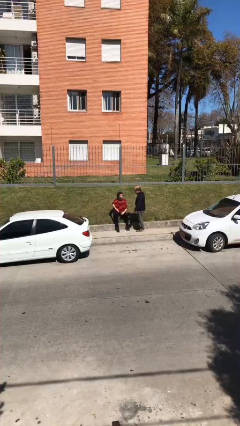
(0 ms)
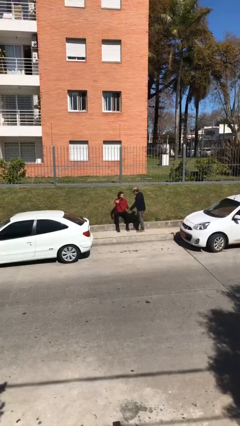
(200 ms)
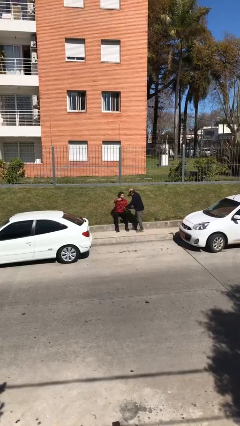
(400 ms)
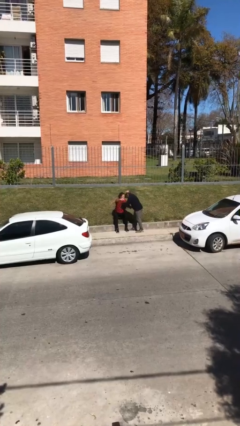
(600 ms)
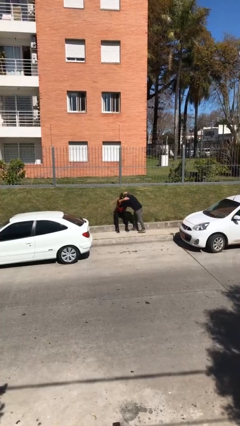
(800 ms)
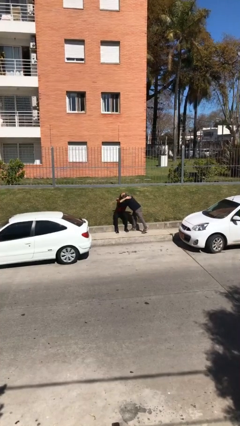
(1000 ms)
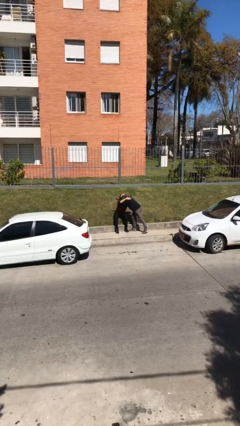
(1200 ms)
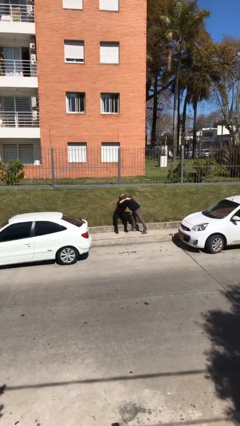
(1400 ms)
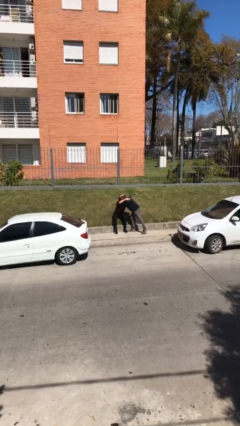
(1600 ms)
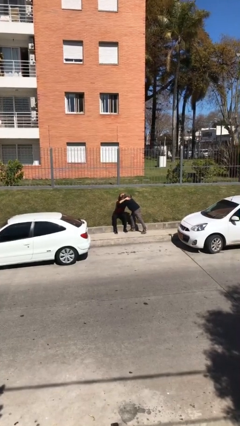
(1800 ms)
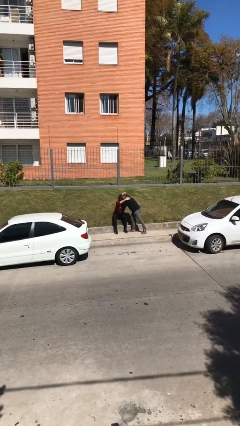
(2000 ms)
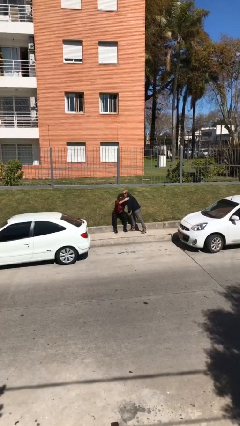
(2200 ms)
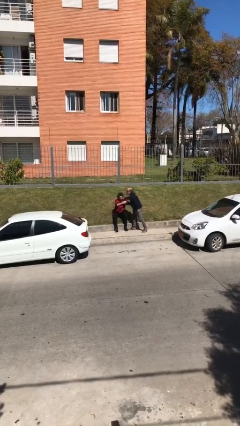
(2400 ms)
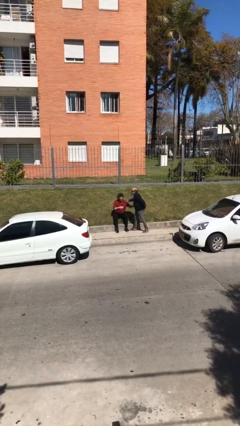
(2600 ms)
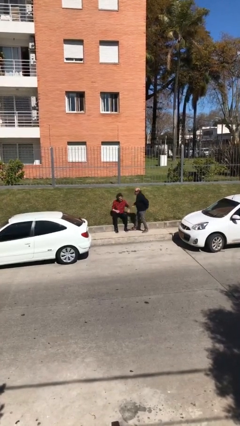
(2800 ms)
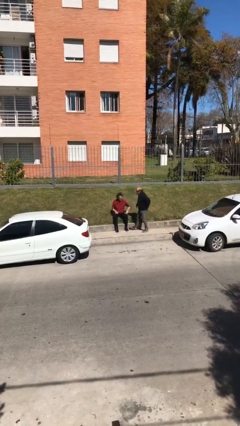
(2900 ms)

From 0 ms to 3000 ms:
person embraces person

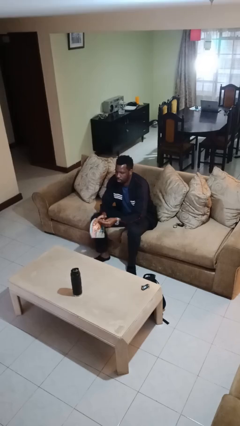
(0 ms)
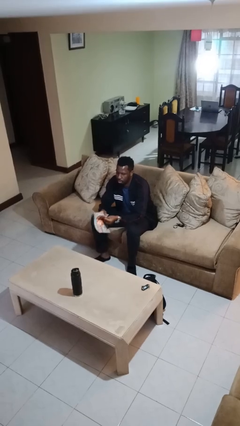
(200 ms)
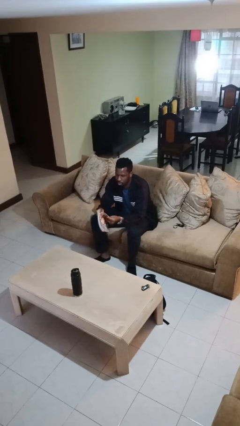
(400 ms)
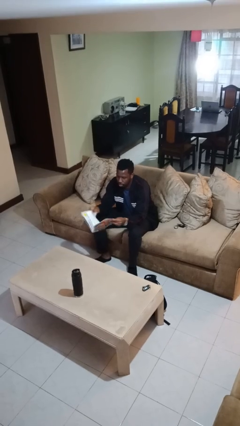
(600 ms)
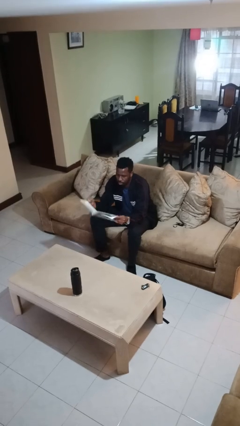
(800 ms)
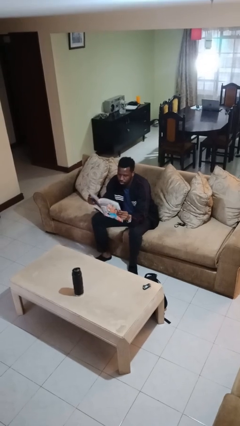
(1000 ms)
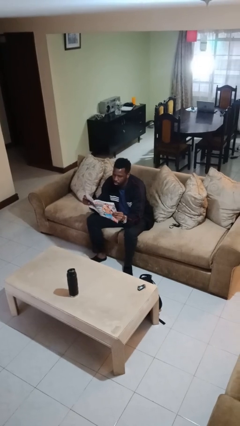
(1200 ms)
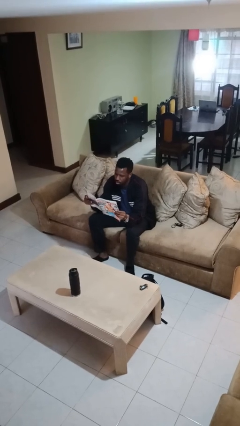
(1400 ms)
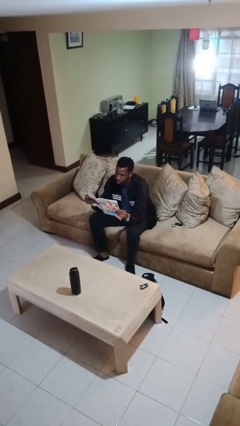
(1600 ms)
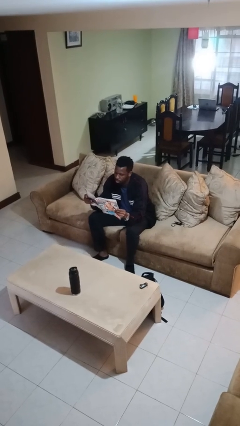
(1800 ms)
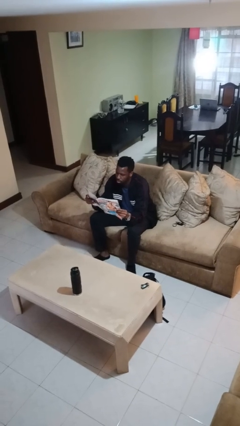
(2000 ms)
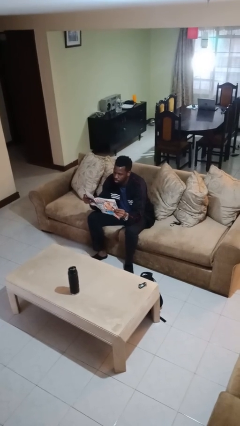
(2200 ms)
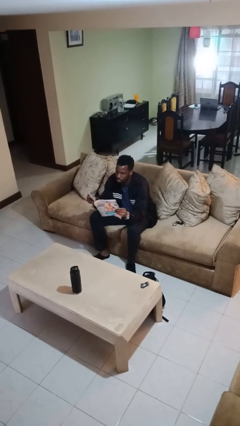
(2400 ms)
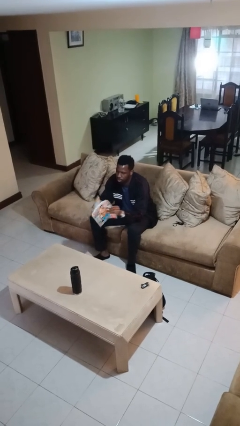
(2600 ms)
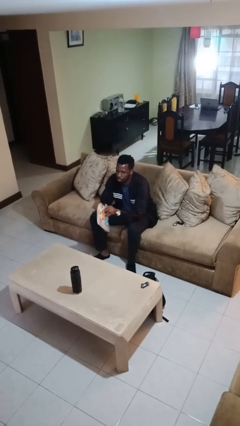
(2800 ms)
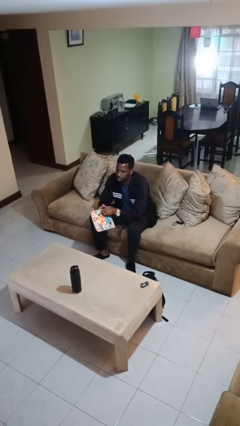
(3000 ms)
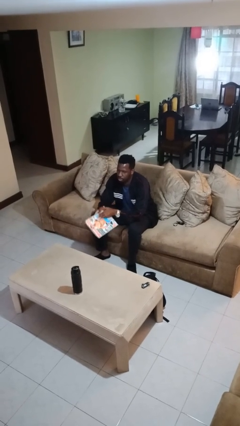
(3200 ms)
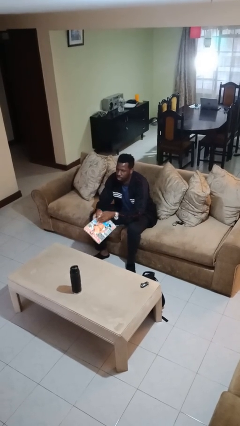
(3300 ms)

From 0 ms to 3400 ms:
person reads magazine

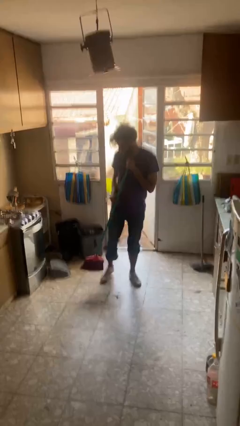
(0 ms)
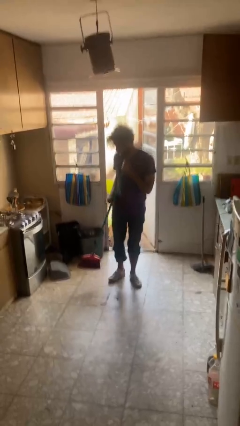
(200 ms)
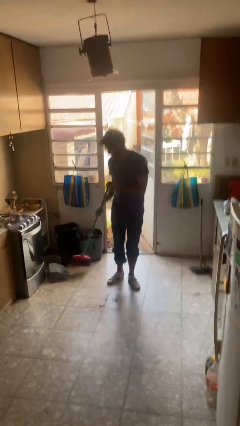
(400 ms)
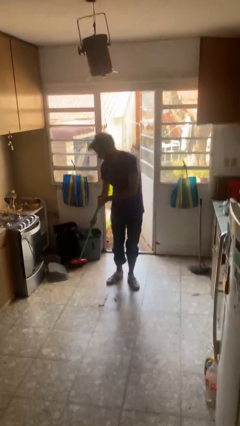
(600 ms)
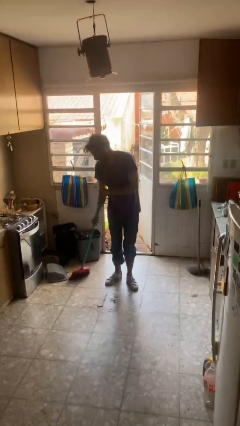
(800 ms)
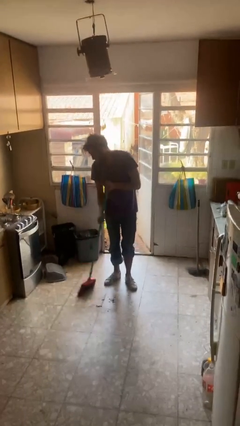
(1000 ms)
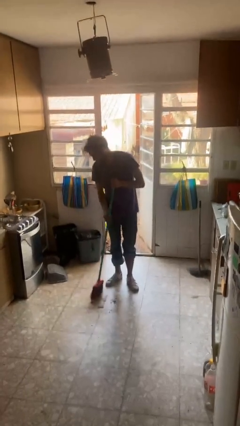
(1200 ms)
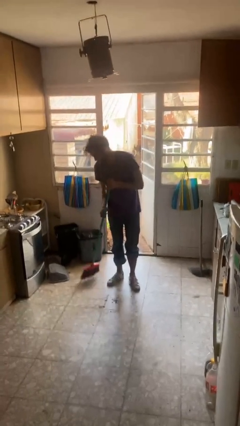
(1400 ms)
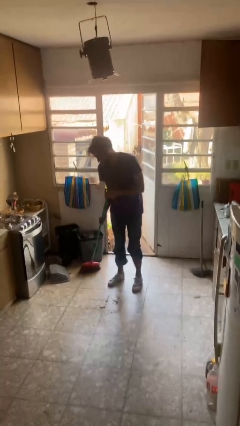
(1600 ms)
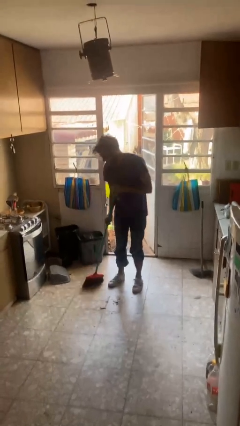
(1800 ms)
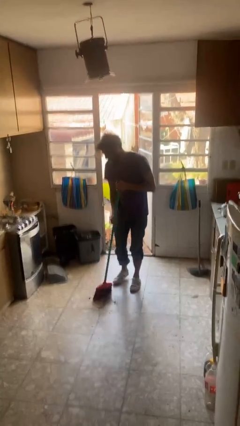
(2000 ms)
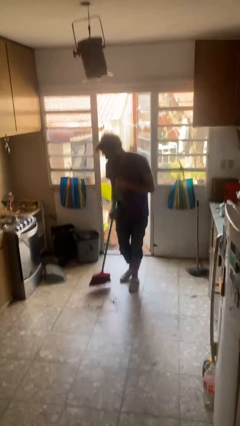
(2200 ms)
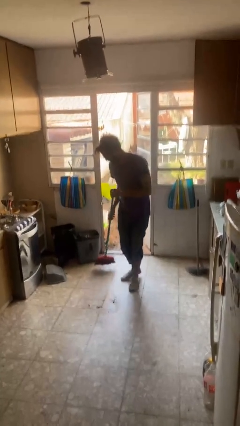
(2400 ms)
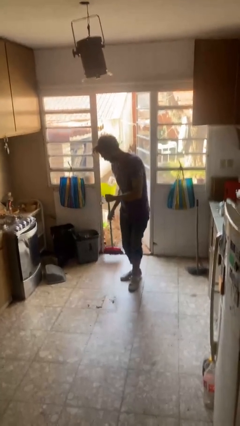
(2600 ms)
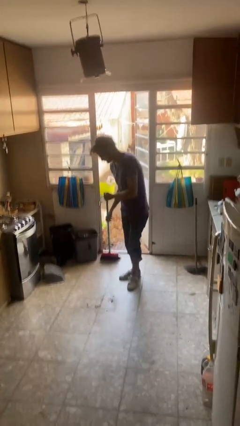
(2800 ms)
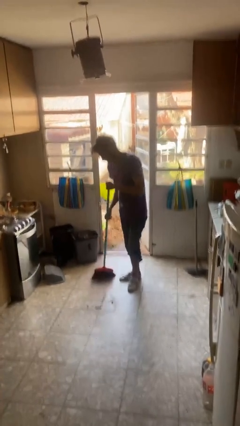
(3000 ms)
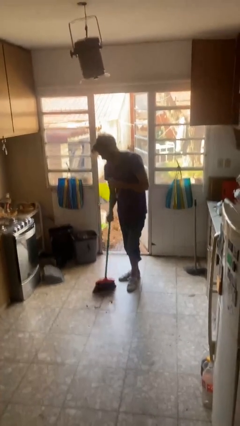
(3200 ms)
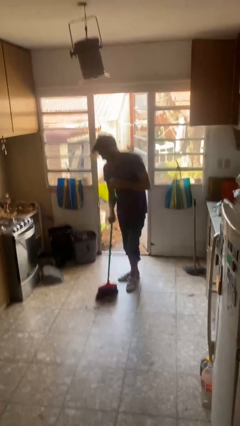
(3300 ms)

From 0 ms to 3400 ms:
person sweeps floor

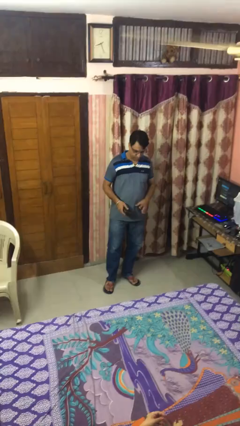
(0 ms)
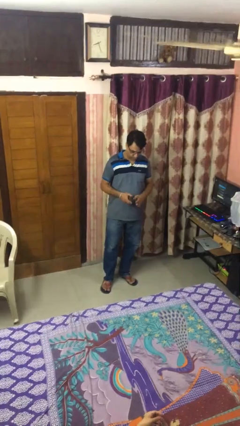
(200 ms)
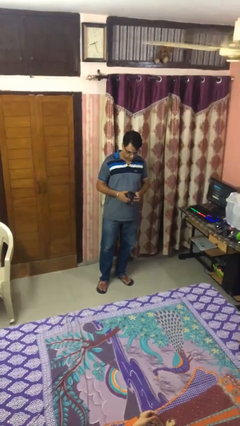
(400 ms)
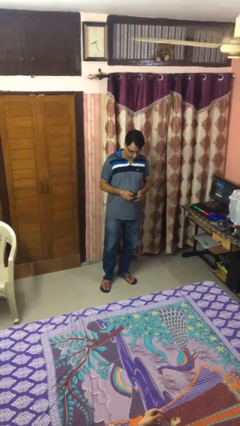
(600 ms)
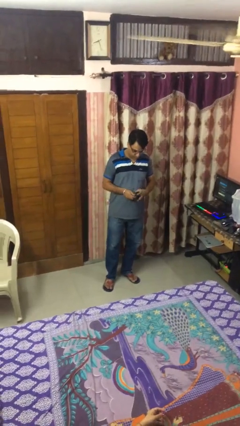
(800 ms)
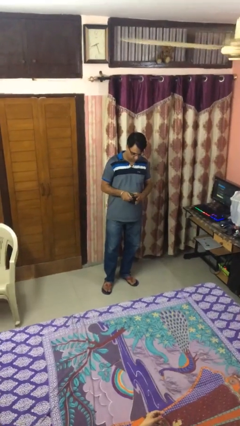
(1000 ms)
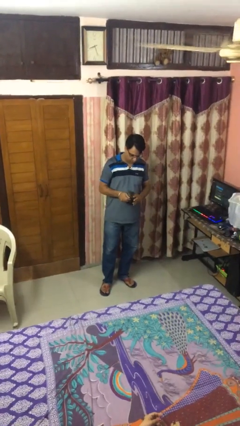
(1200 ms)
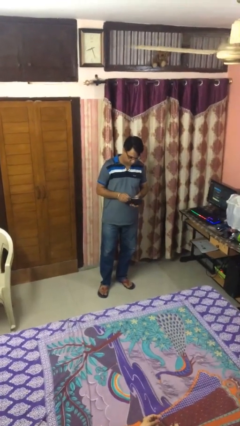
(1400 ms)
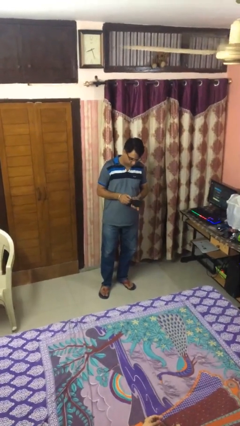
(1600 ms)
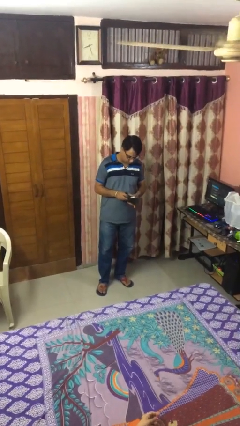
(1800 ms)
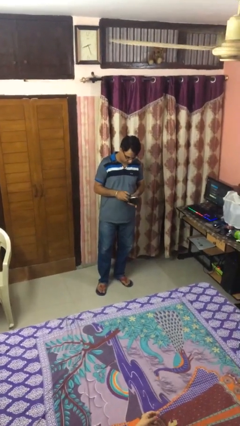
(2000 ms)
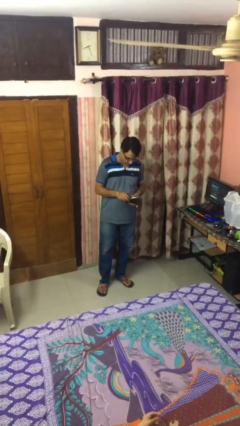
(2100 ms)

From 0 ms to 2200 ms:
person searches in purse

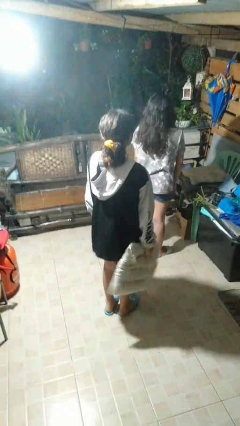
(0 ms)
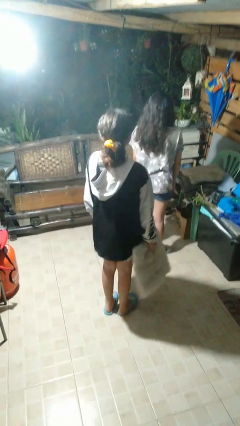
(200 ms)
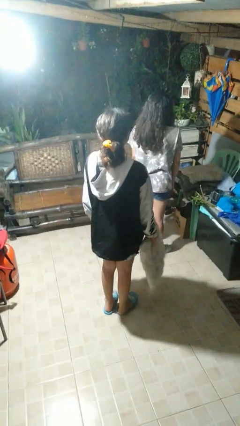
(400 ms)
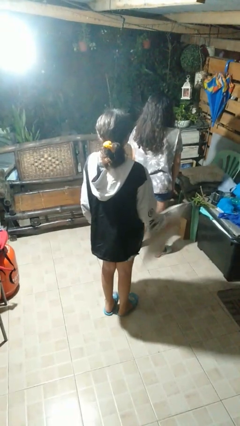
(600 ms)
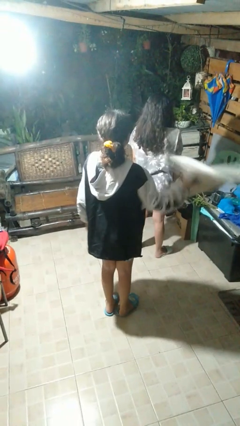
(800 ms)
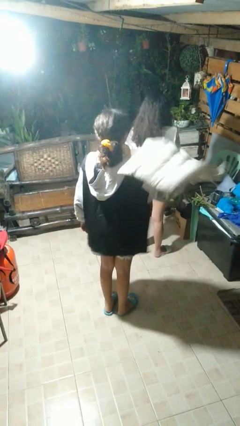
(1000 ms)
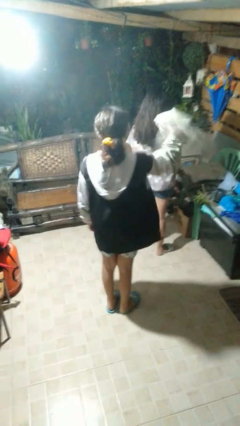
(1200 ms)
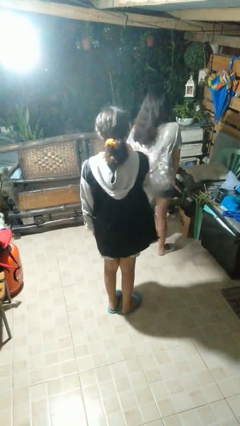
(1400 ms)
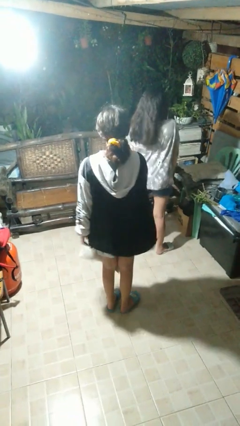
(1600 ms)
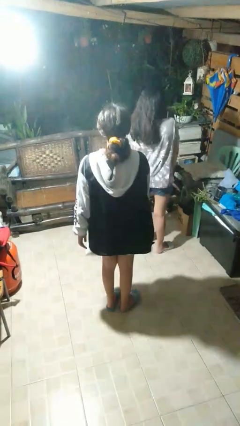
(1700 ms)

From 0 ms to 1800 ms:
person hits person with pillow

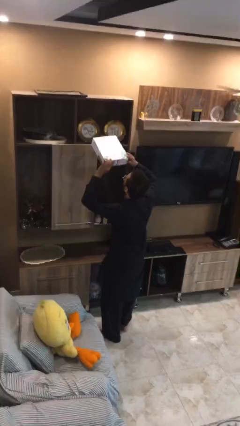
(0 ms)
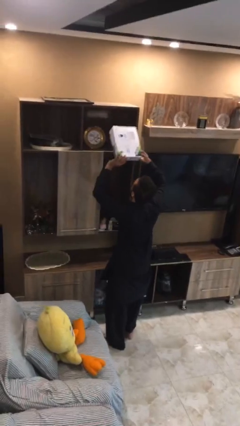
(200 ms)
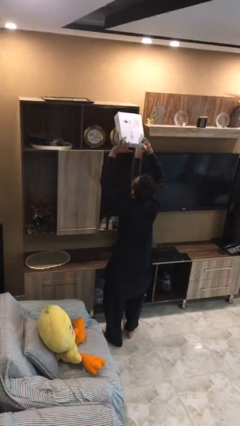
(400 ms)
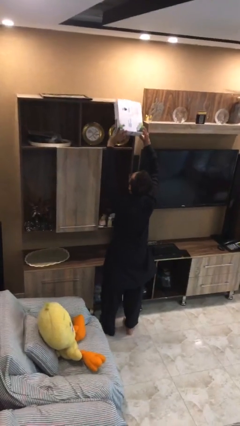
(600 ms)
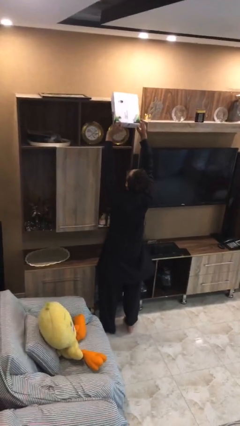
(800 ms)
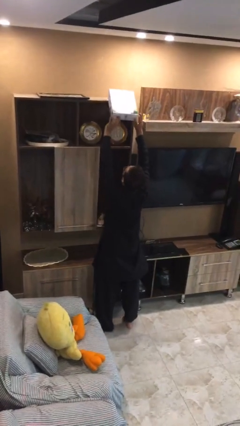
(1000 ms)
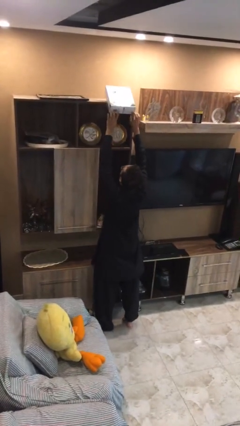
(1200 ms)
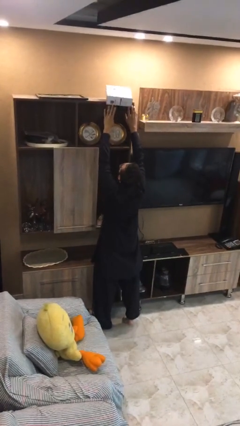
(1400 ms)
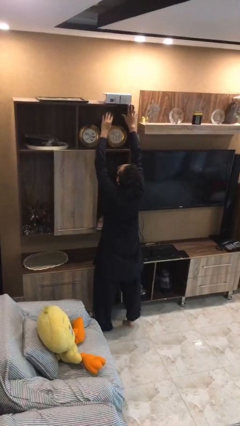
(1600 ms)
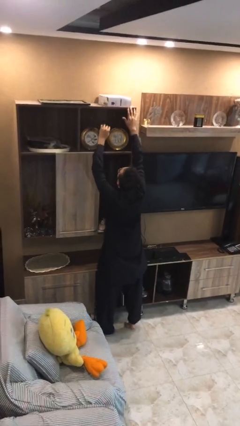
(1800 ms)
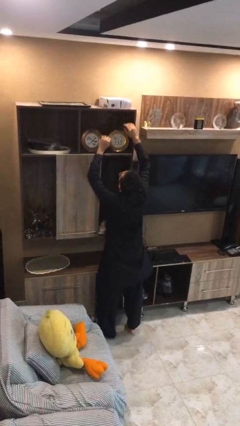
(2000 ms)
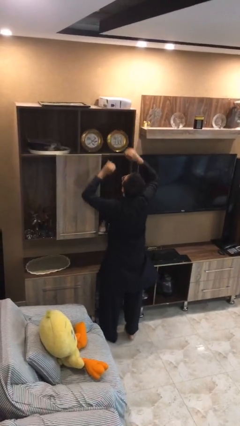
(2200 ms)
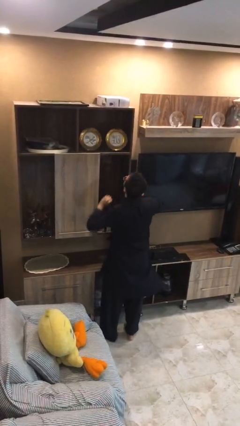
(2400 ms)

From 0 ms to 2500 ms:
person puts down object on shelf

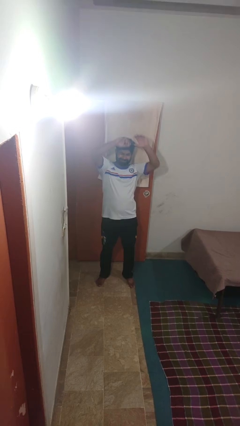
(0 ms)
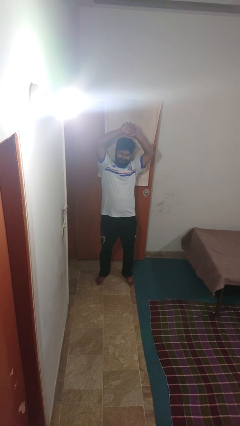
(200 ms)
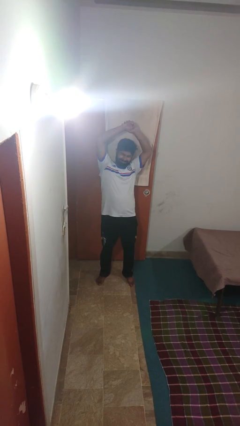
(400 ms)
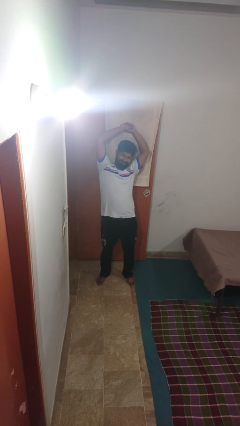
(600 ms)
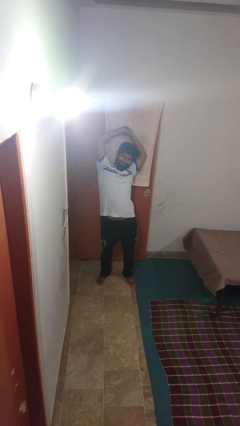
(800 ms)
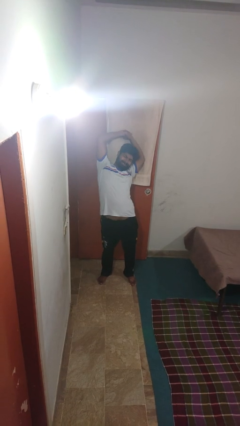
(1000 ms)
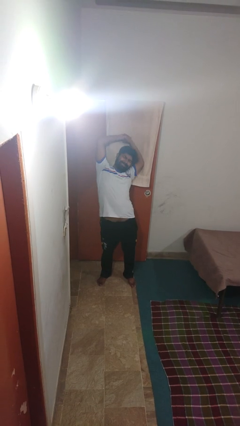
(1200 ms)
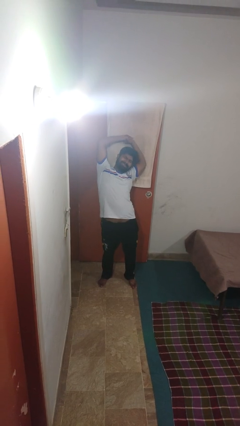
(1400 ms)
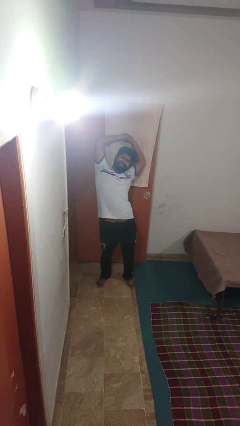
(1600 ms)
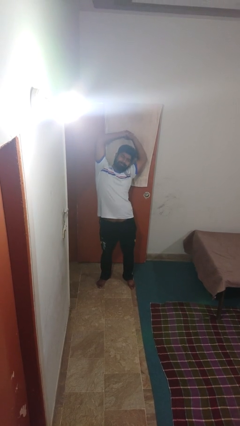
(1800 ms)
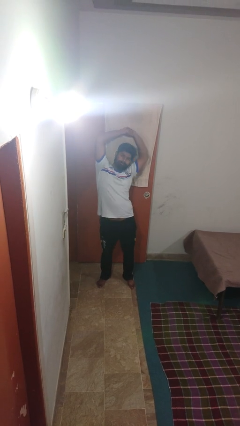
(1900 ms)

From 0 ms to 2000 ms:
person stretches arms over head
